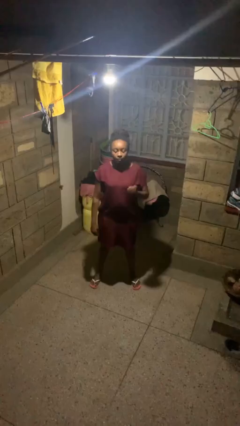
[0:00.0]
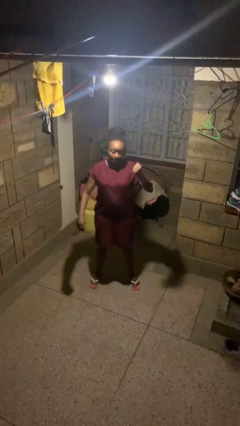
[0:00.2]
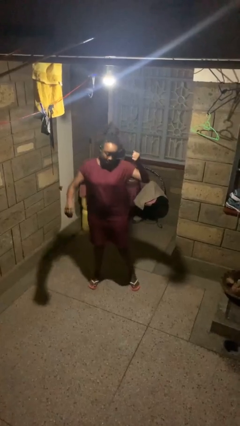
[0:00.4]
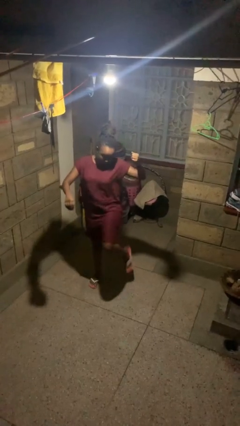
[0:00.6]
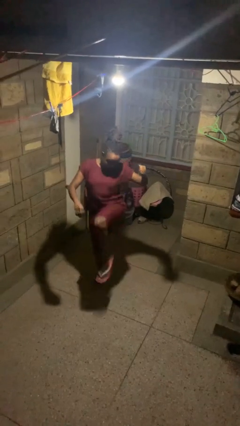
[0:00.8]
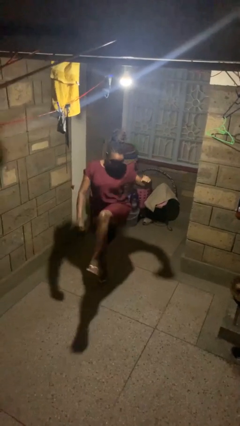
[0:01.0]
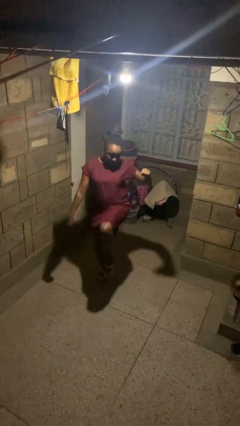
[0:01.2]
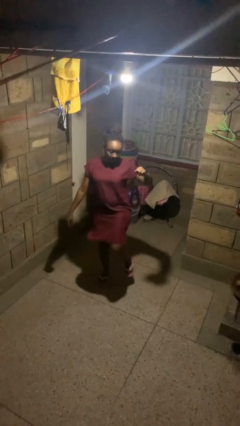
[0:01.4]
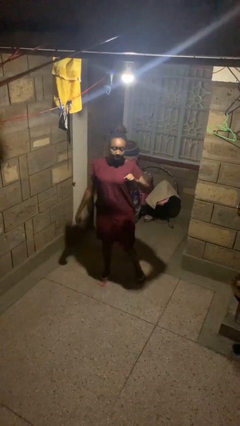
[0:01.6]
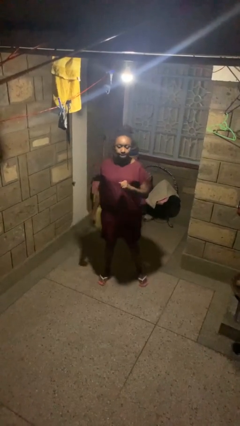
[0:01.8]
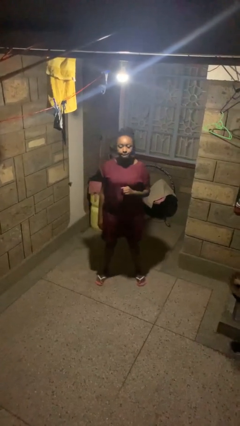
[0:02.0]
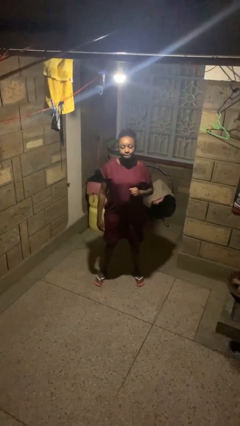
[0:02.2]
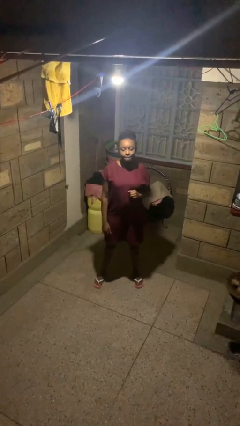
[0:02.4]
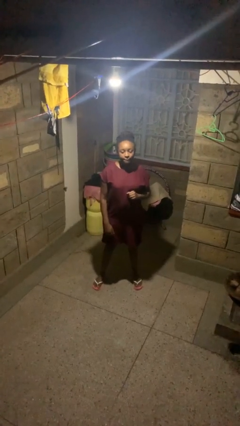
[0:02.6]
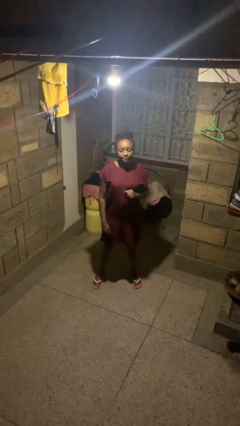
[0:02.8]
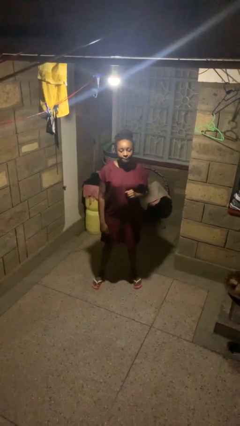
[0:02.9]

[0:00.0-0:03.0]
person karate kicks

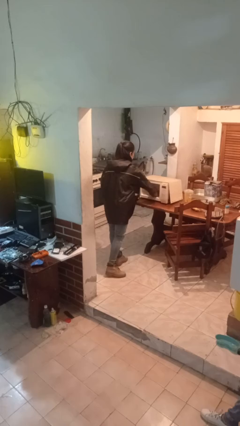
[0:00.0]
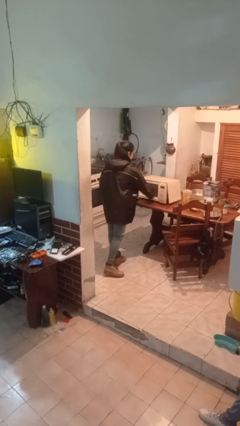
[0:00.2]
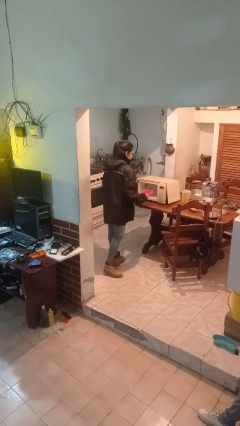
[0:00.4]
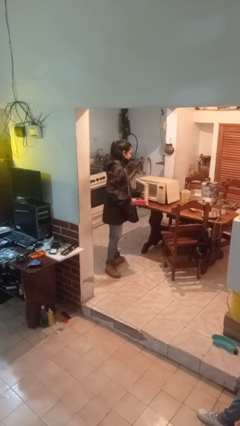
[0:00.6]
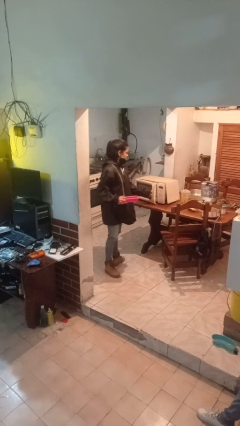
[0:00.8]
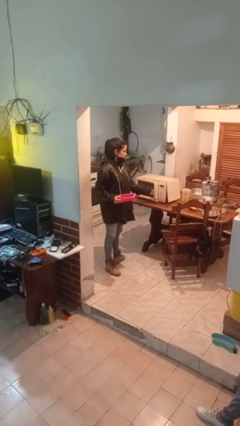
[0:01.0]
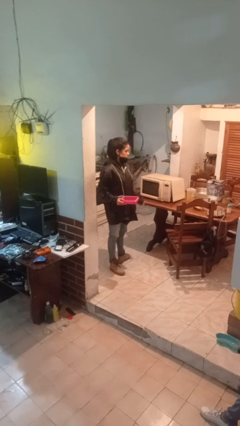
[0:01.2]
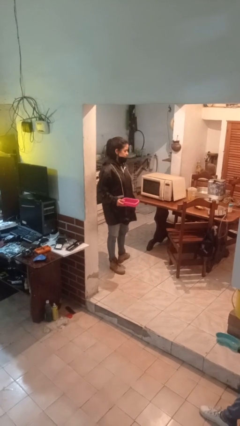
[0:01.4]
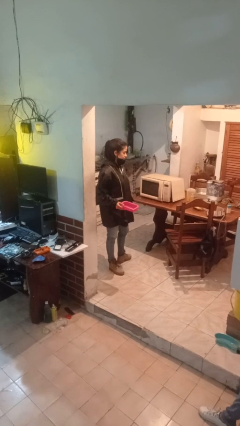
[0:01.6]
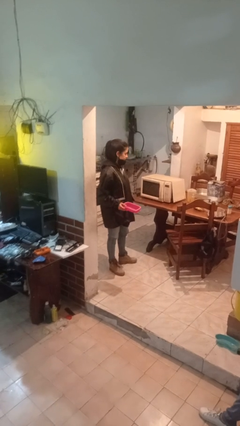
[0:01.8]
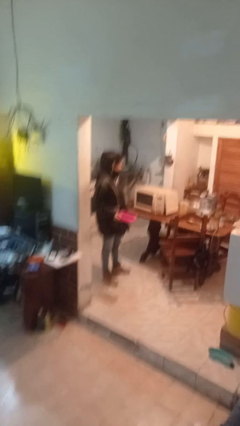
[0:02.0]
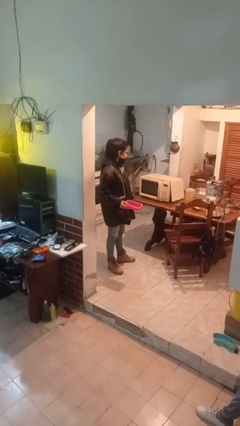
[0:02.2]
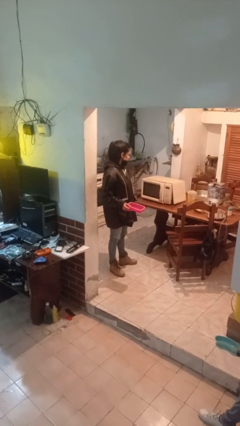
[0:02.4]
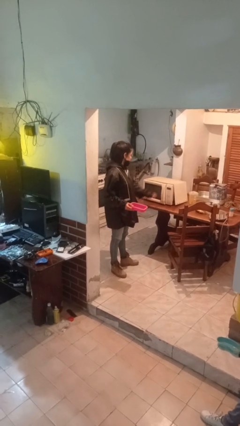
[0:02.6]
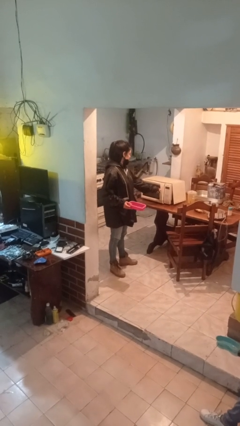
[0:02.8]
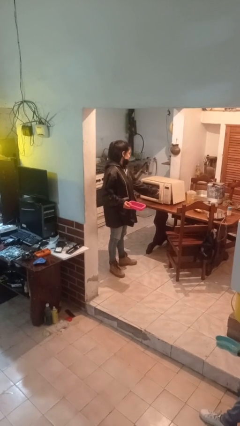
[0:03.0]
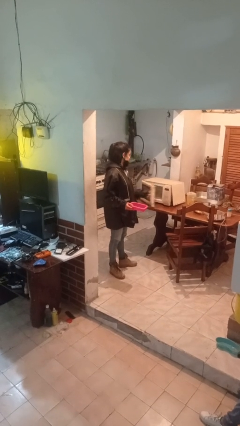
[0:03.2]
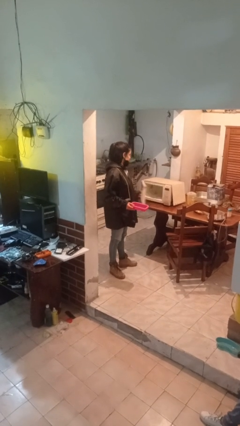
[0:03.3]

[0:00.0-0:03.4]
person dries dish

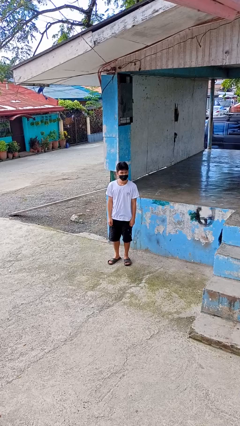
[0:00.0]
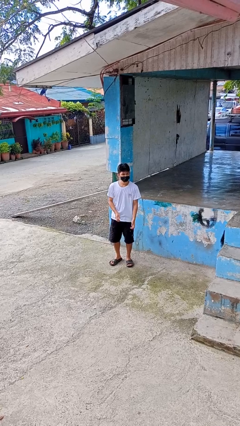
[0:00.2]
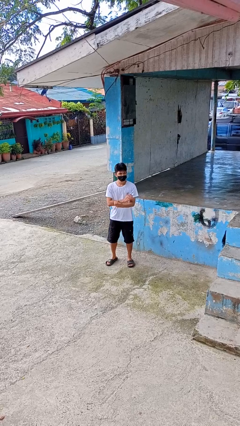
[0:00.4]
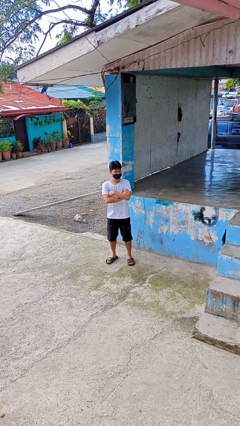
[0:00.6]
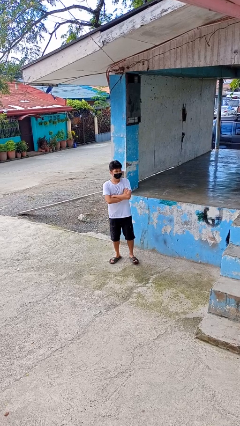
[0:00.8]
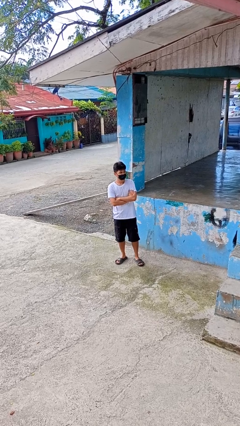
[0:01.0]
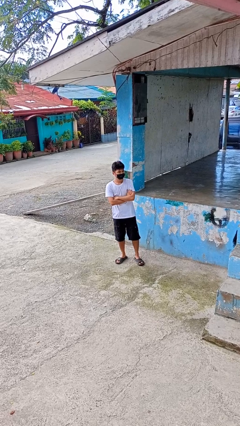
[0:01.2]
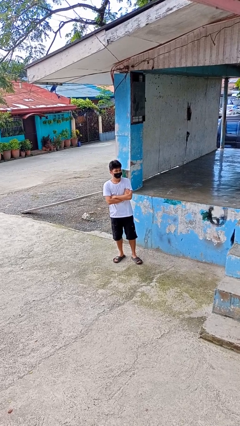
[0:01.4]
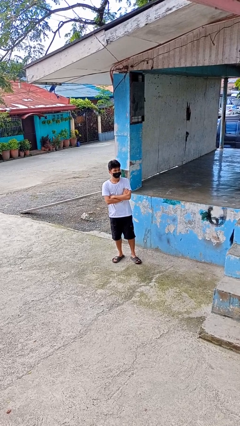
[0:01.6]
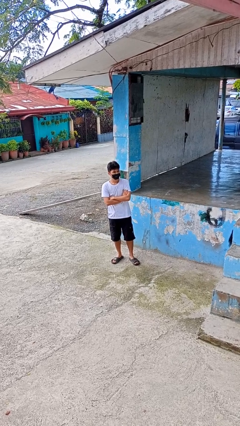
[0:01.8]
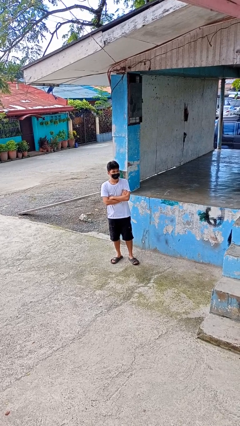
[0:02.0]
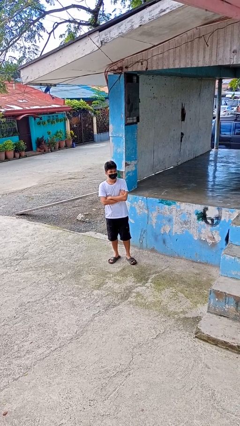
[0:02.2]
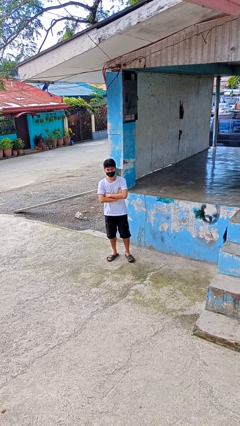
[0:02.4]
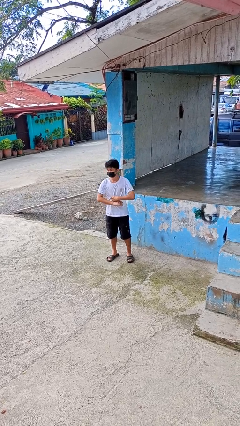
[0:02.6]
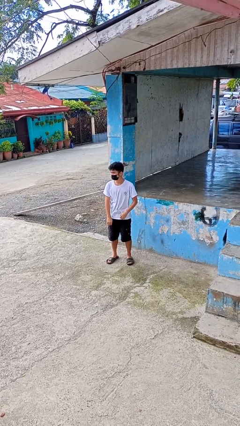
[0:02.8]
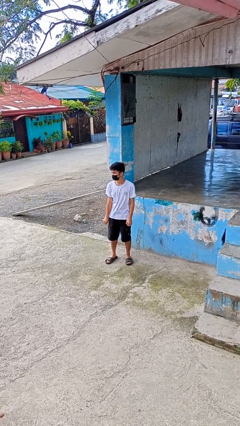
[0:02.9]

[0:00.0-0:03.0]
person crosses arms

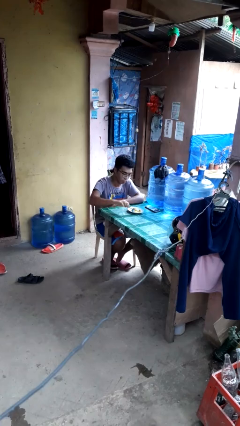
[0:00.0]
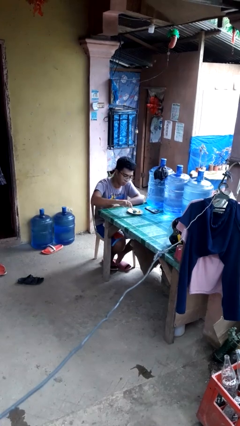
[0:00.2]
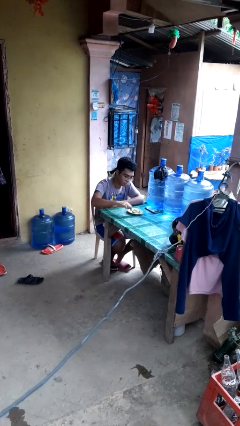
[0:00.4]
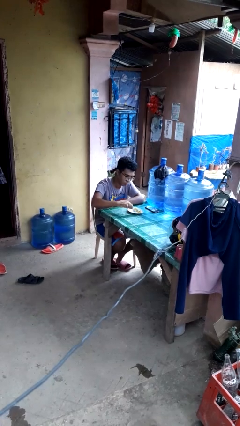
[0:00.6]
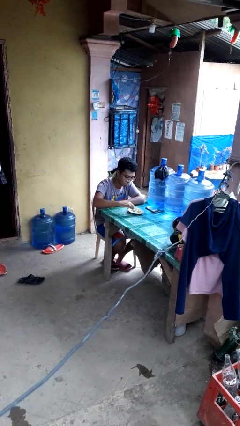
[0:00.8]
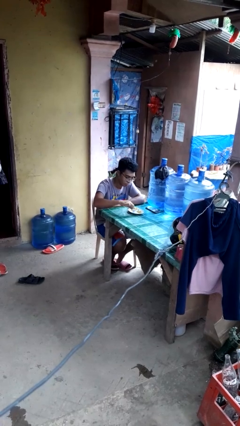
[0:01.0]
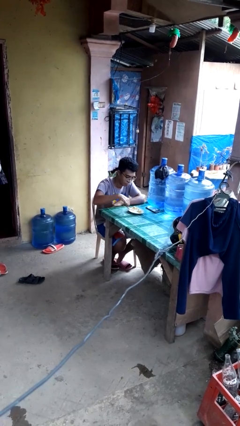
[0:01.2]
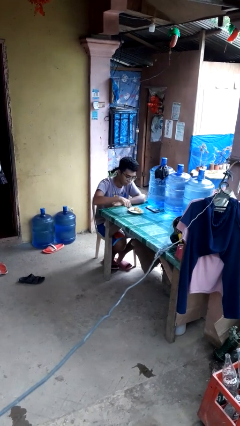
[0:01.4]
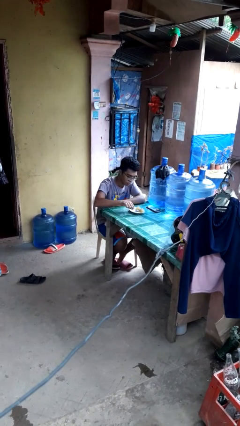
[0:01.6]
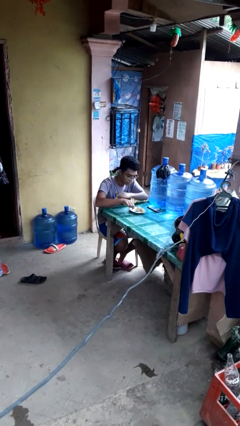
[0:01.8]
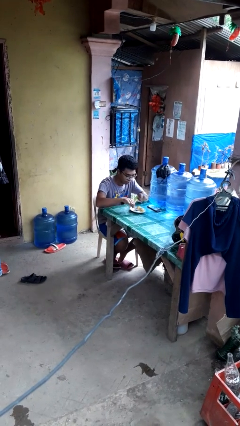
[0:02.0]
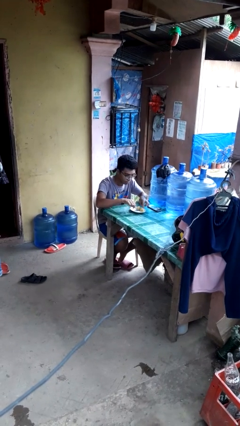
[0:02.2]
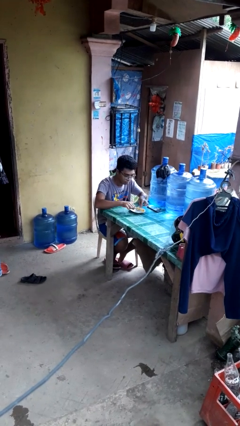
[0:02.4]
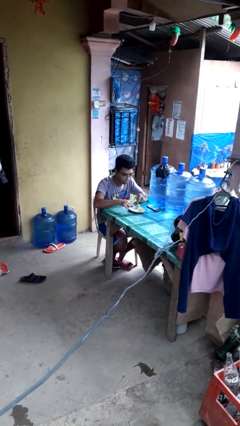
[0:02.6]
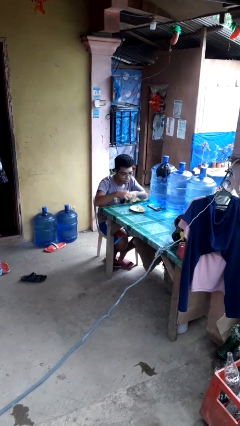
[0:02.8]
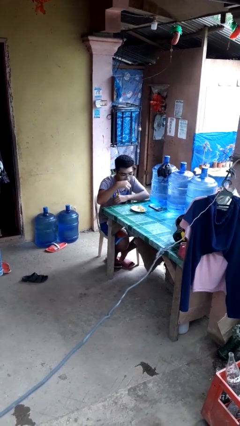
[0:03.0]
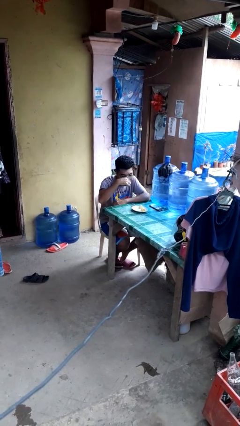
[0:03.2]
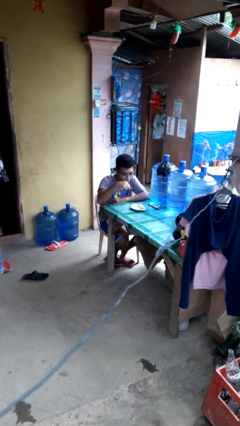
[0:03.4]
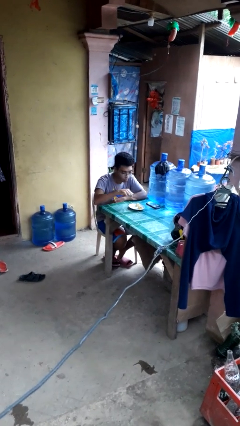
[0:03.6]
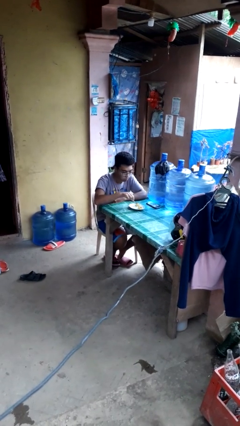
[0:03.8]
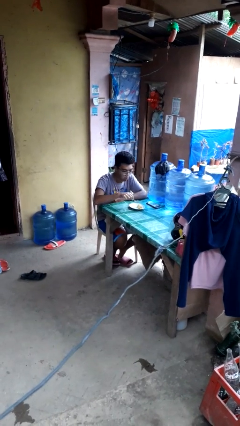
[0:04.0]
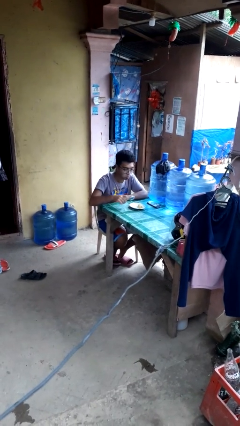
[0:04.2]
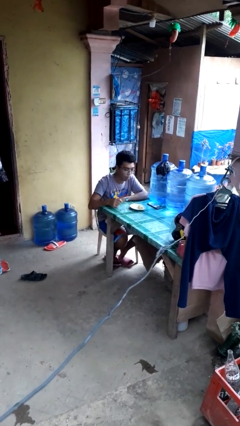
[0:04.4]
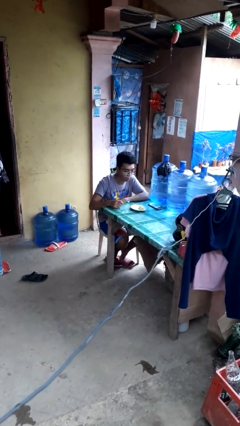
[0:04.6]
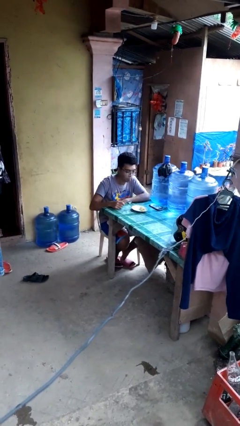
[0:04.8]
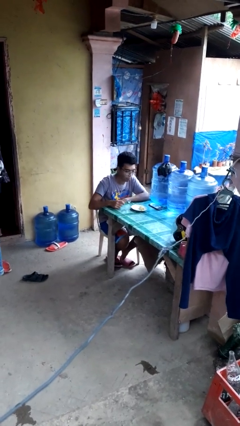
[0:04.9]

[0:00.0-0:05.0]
person eats with utensil

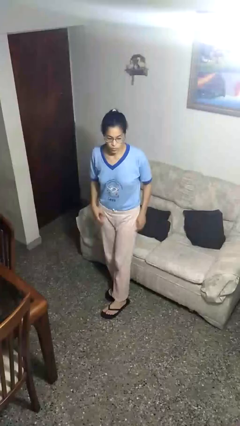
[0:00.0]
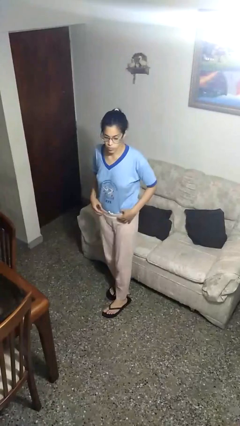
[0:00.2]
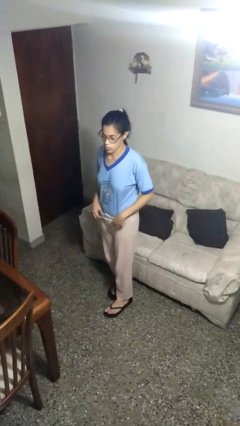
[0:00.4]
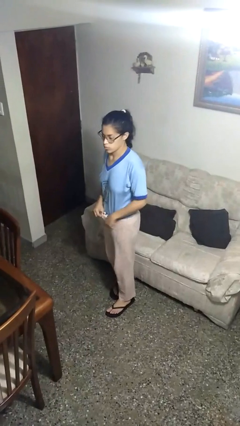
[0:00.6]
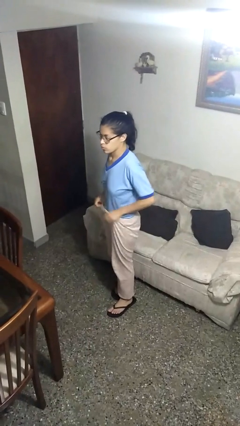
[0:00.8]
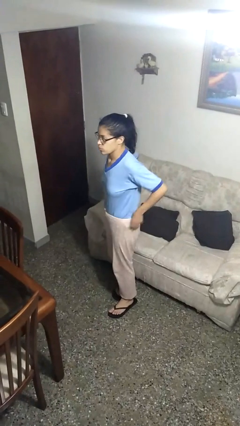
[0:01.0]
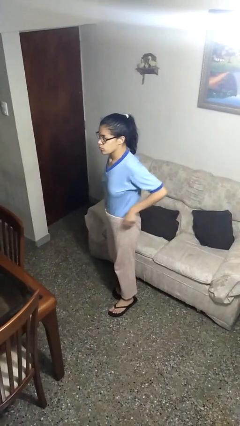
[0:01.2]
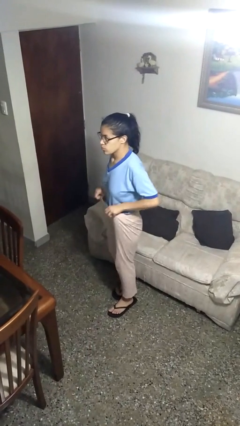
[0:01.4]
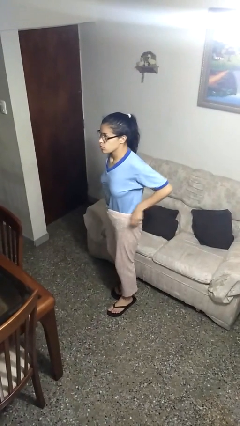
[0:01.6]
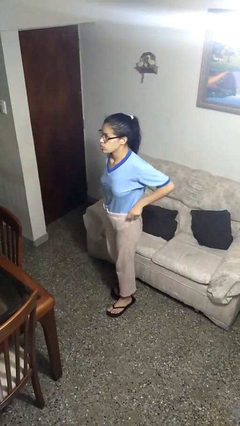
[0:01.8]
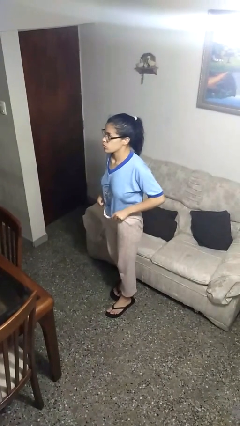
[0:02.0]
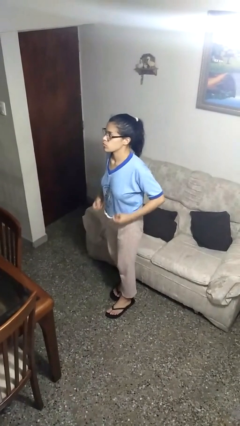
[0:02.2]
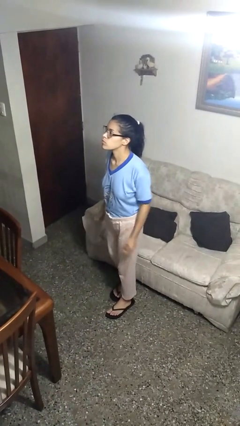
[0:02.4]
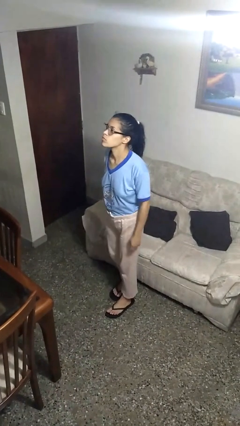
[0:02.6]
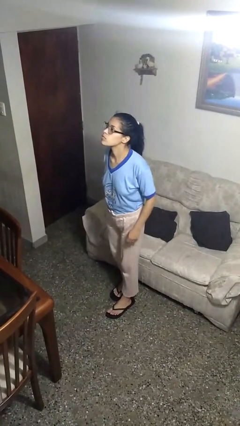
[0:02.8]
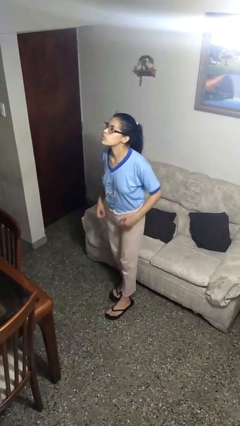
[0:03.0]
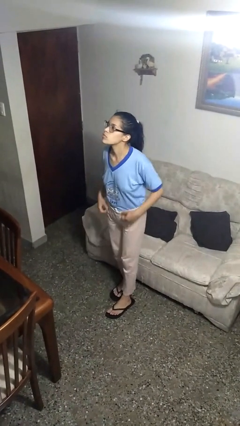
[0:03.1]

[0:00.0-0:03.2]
person hikes up pants
